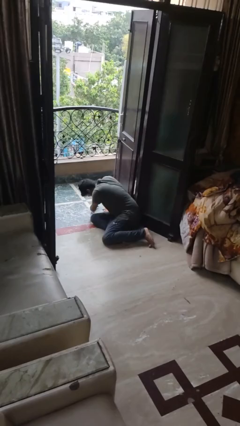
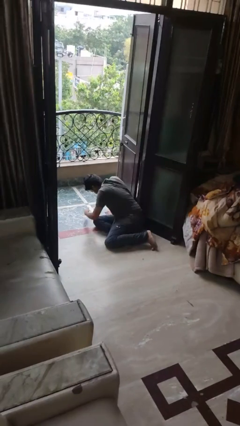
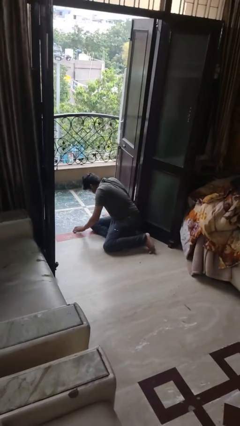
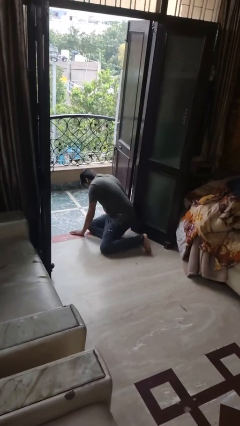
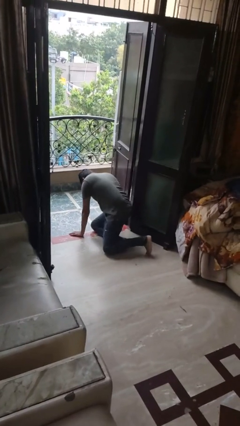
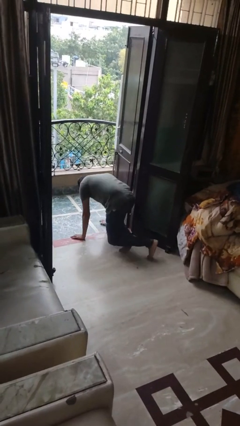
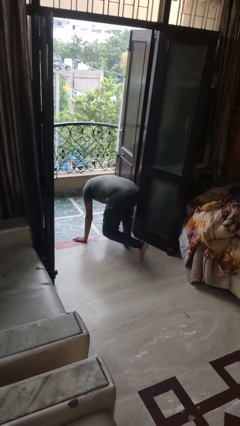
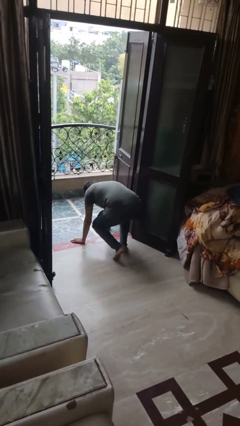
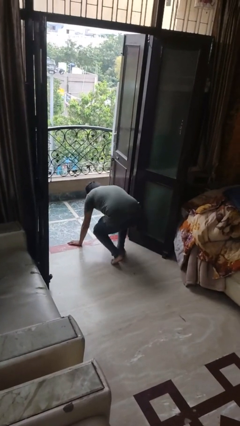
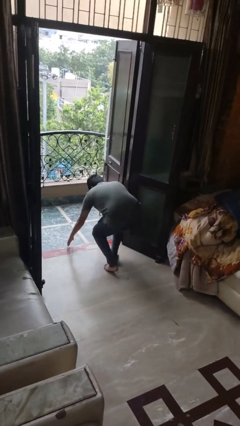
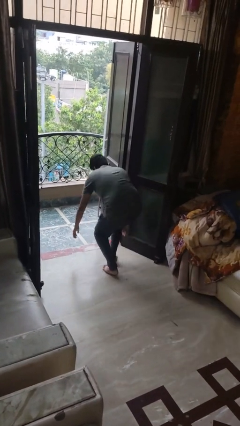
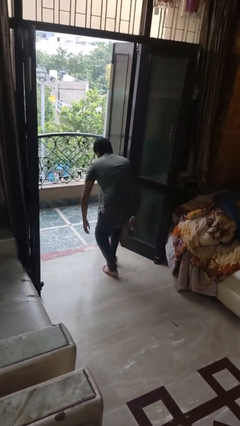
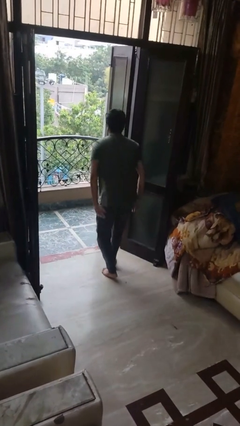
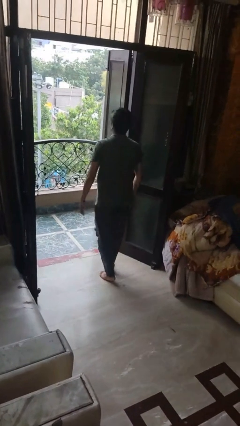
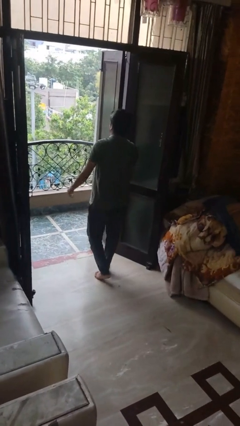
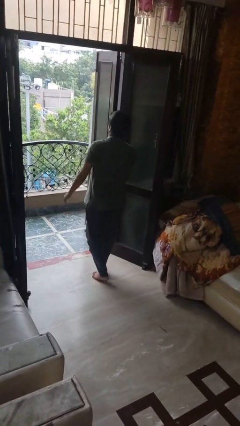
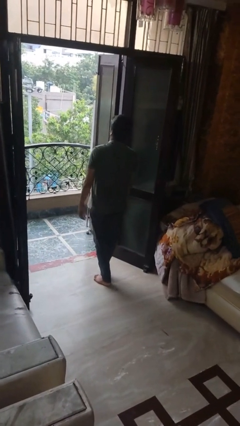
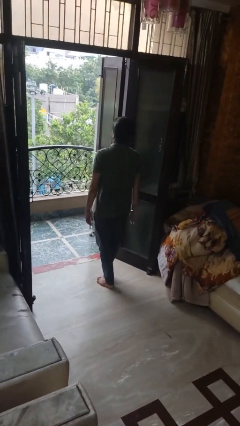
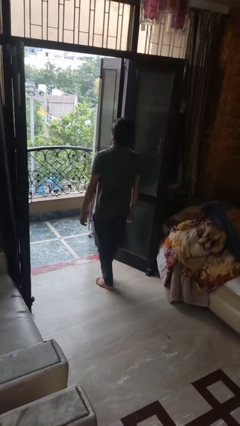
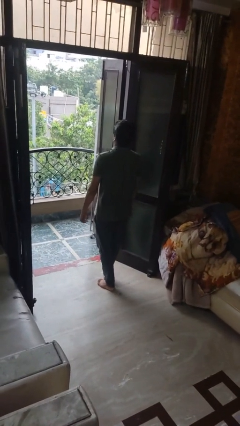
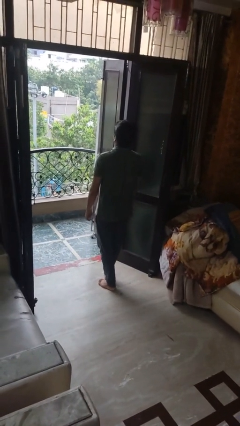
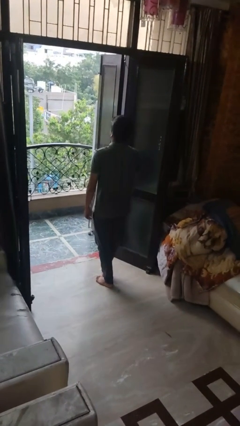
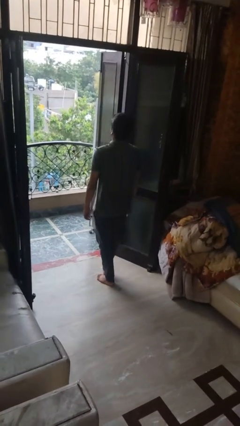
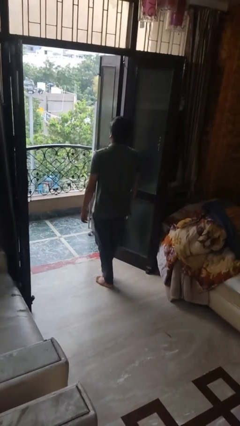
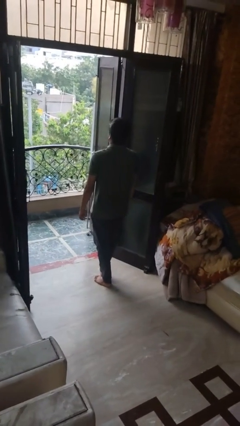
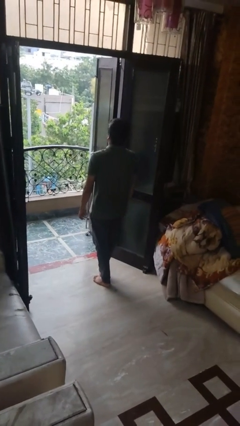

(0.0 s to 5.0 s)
person stands up from floor

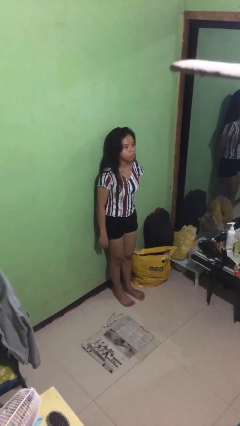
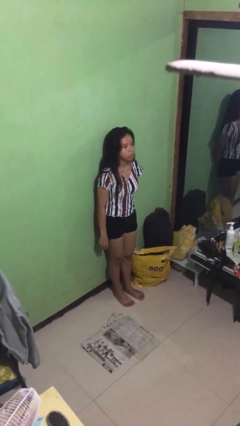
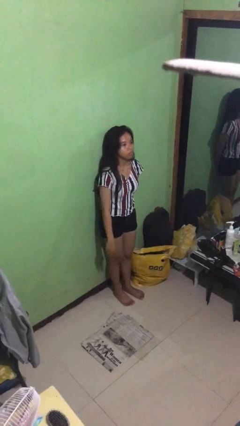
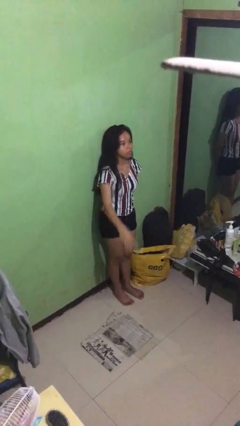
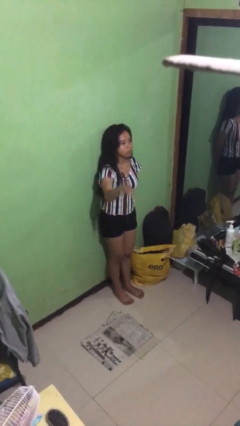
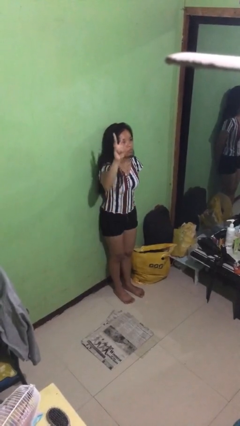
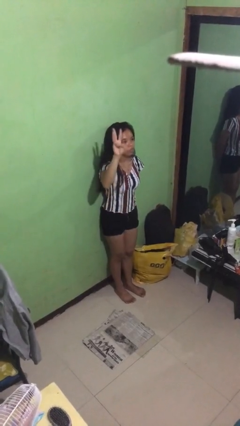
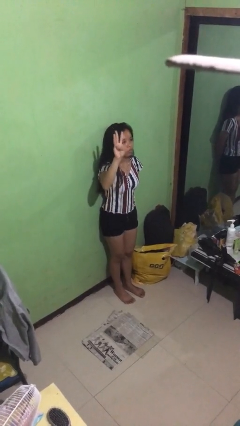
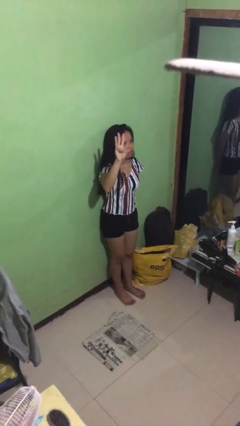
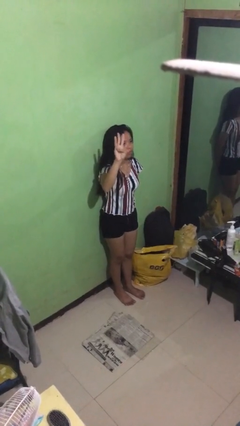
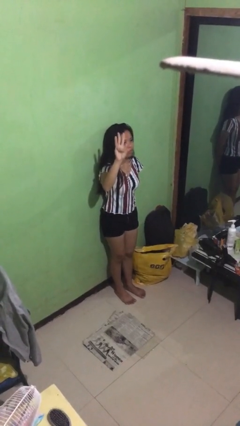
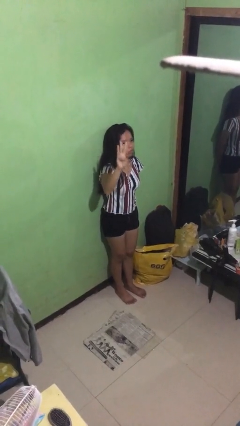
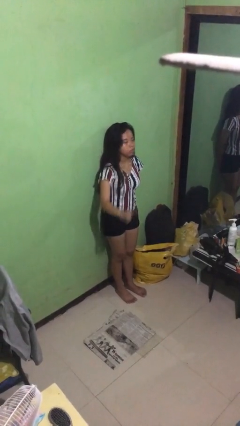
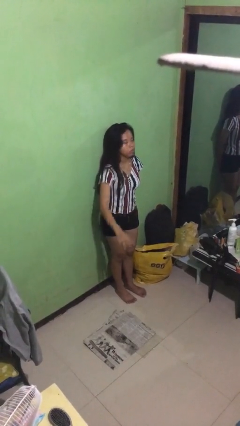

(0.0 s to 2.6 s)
person gestures number three

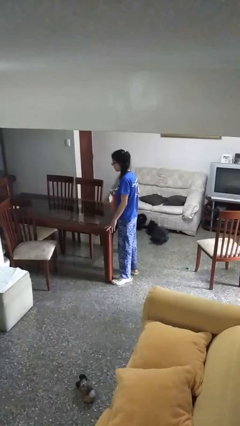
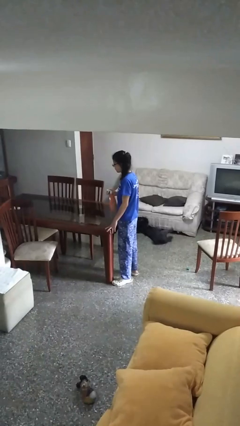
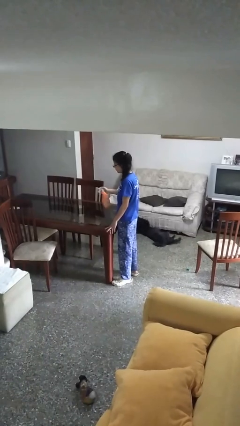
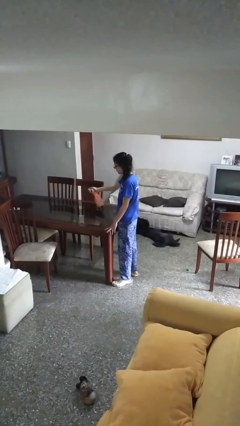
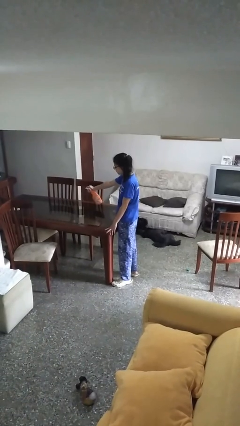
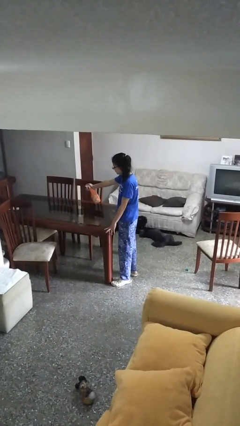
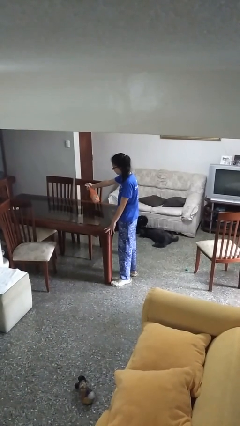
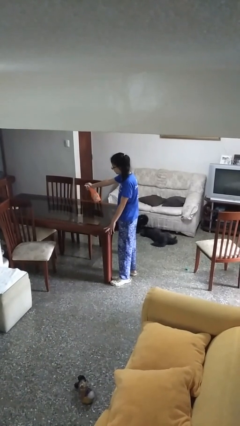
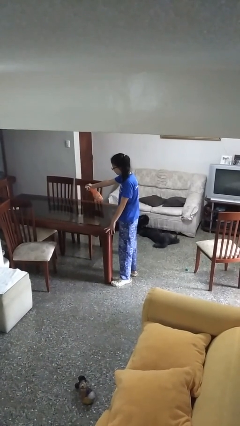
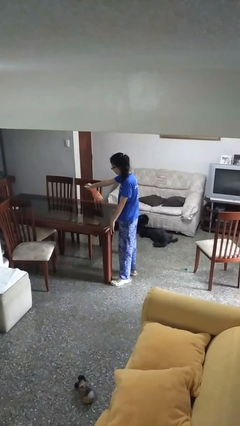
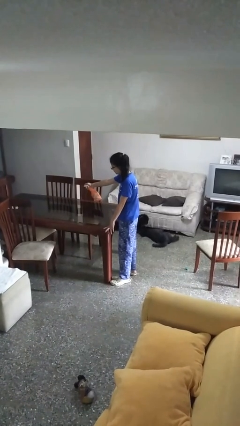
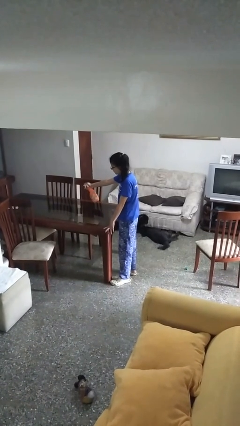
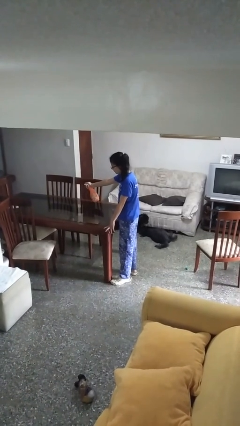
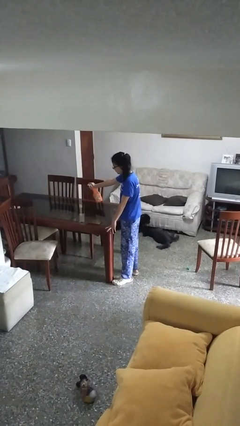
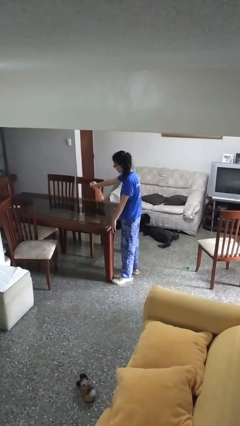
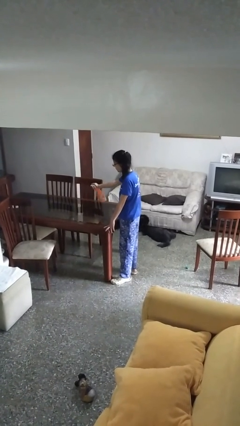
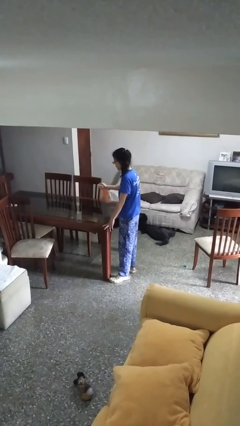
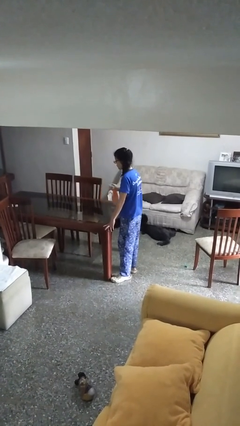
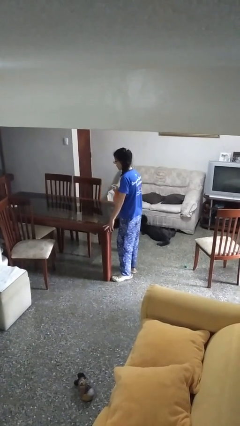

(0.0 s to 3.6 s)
person sprays from bottle

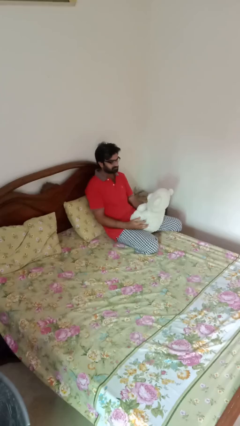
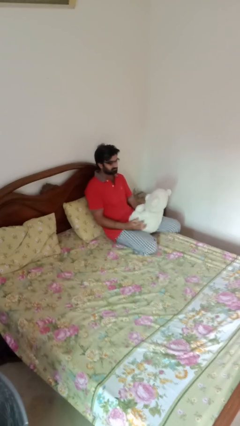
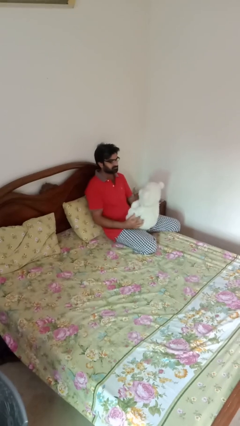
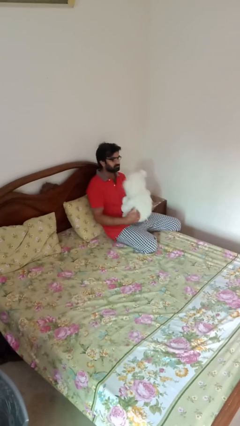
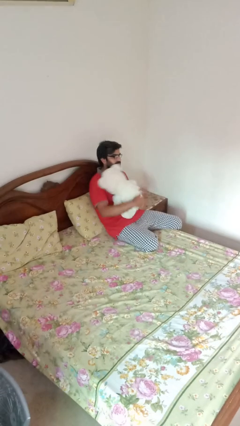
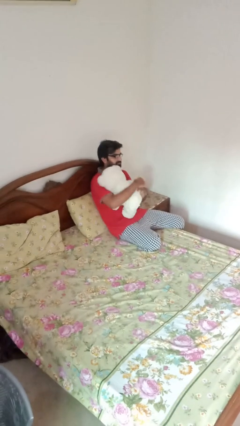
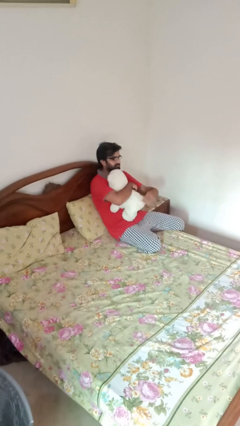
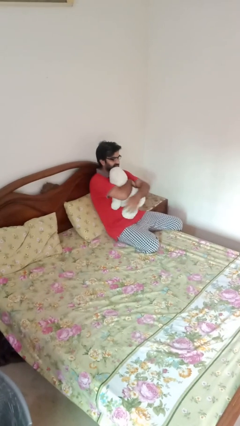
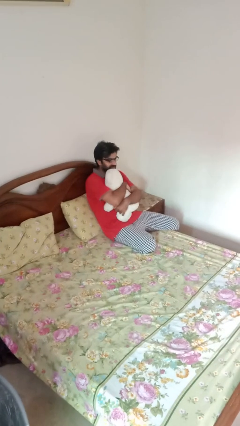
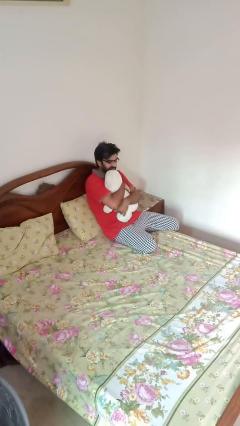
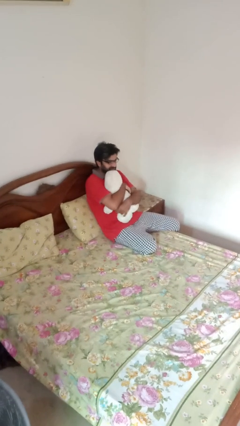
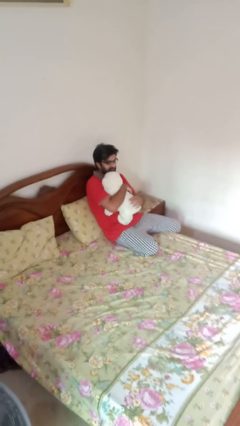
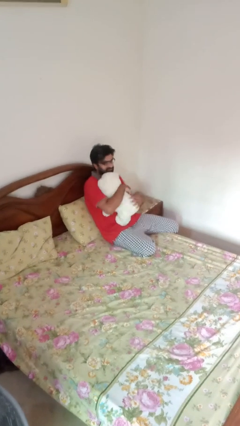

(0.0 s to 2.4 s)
person hugs stuffed animal

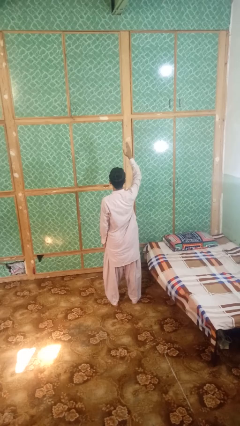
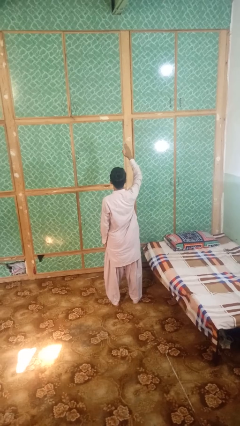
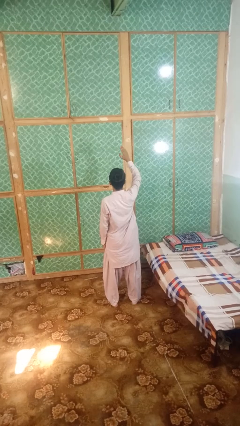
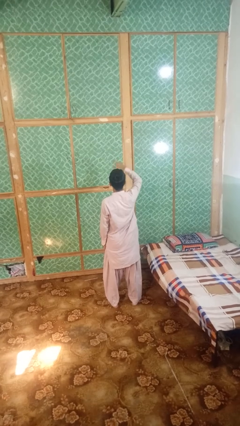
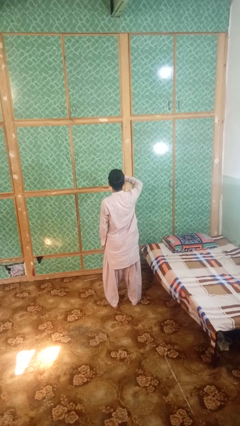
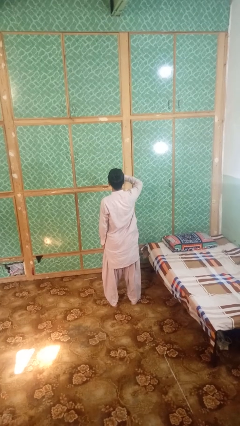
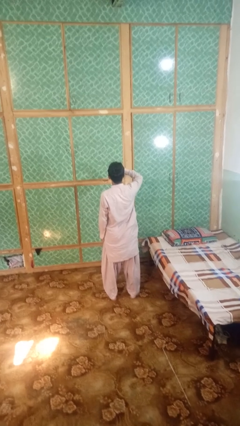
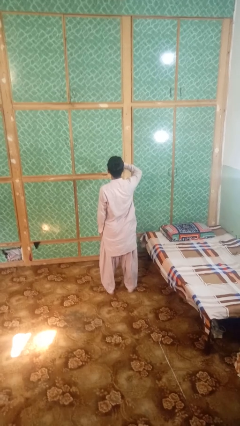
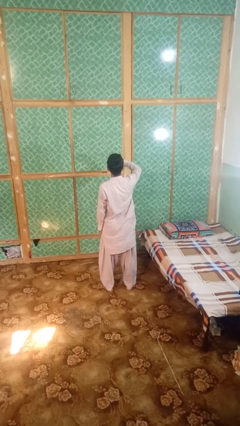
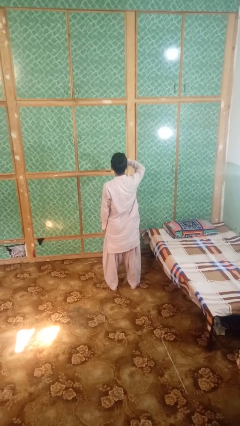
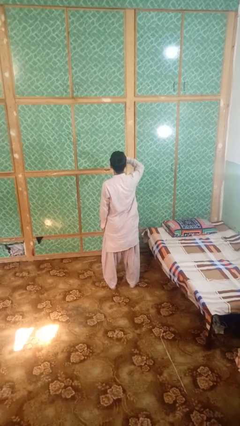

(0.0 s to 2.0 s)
person gestures swipe down

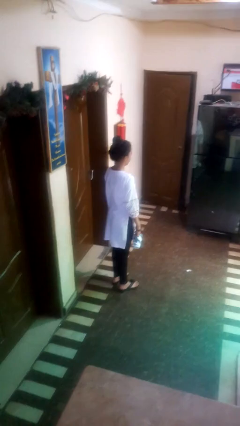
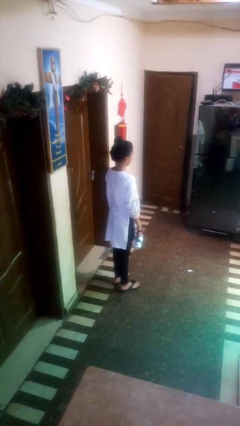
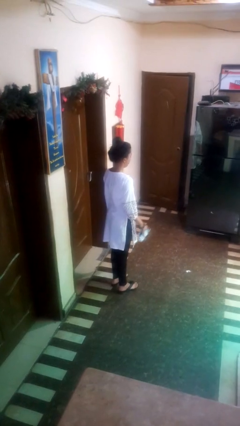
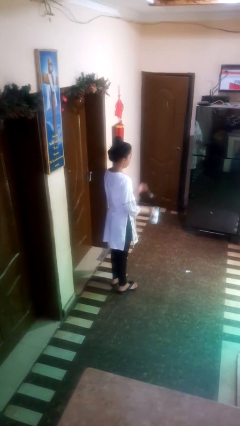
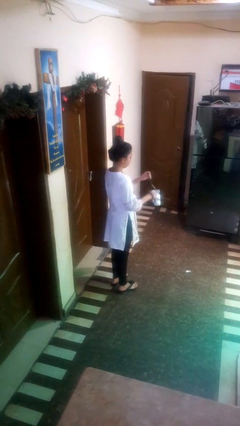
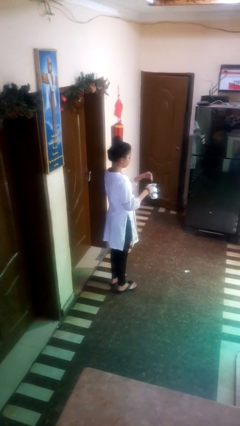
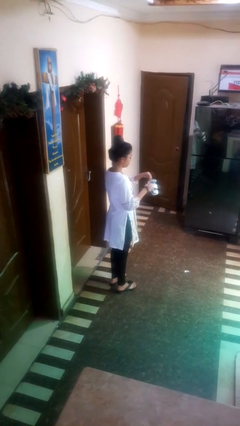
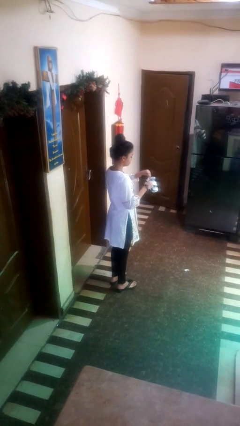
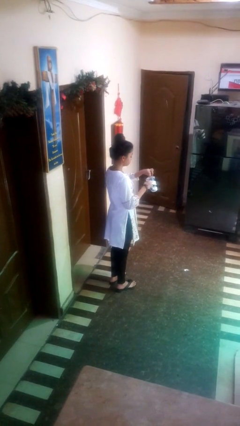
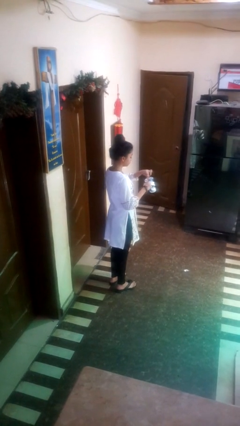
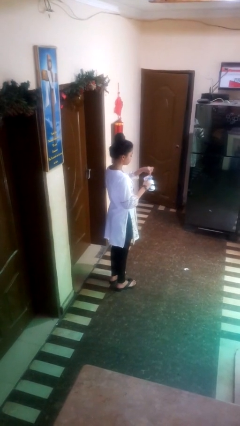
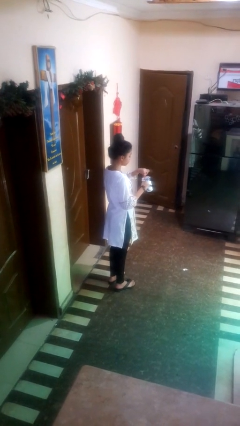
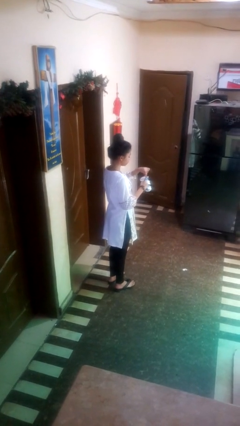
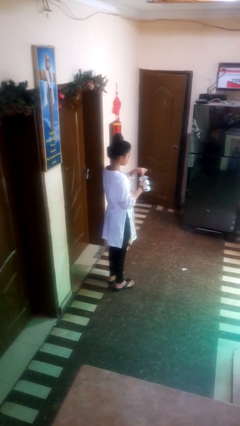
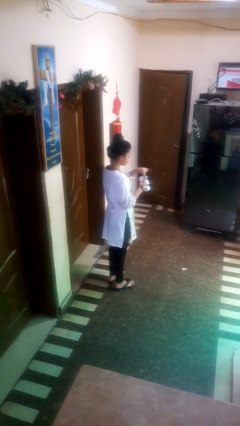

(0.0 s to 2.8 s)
person stirs mug
